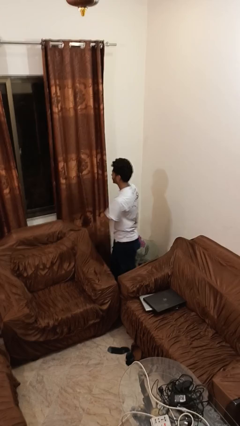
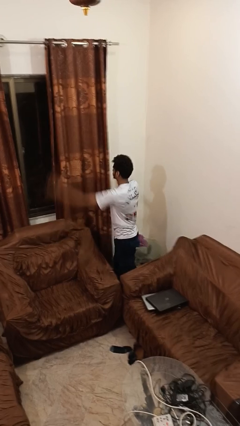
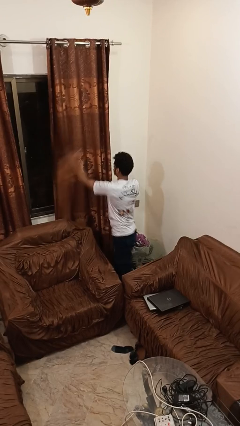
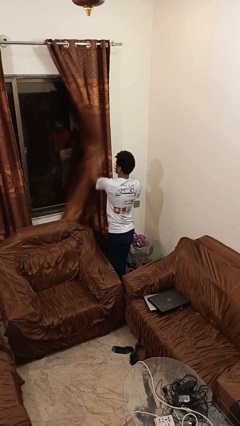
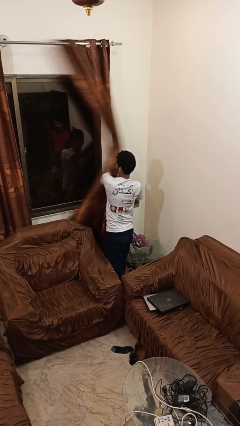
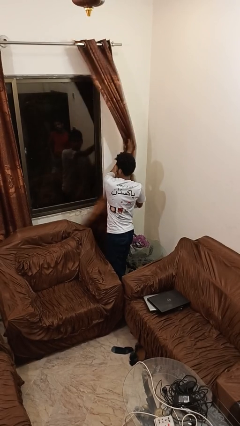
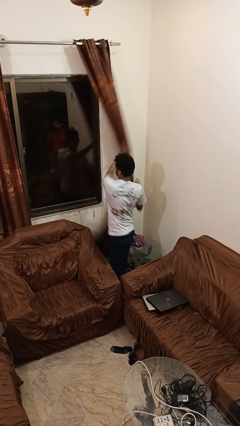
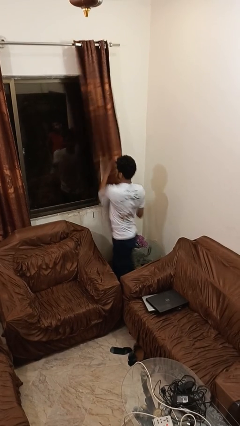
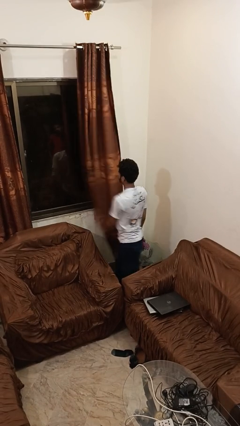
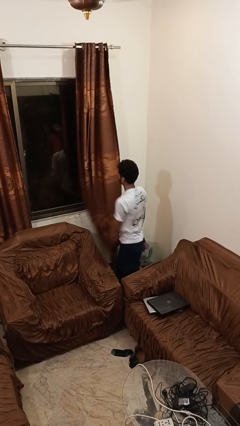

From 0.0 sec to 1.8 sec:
person opens curtains

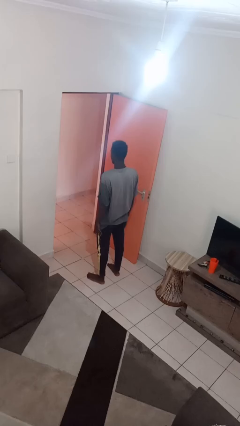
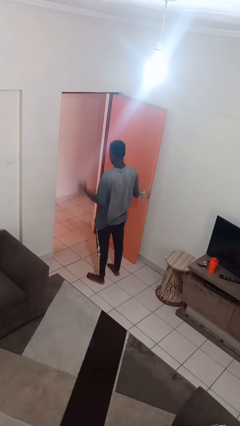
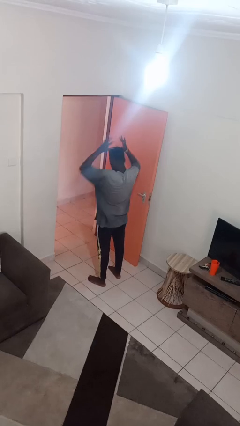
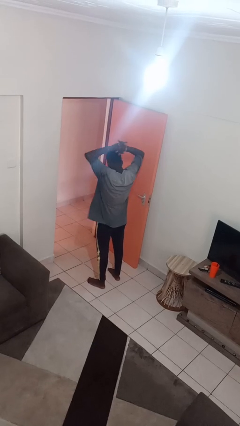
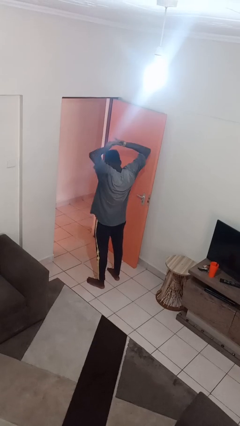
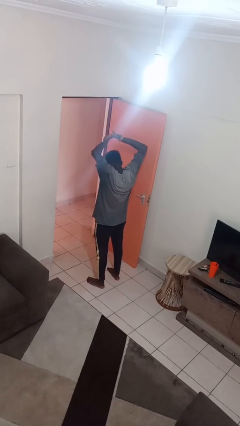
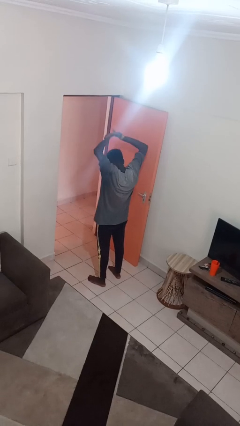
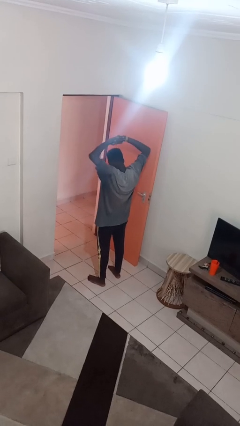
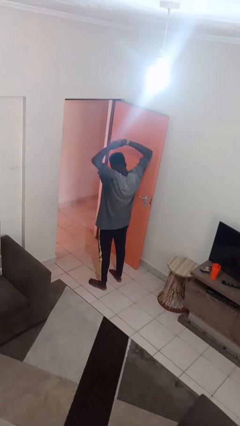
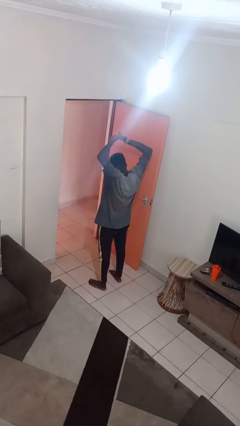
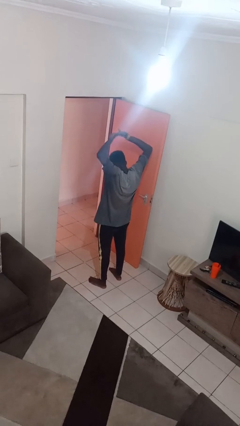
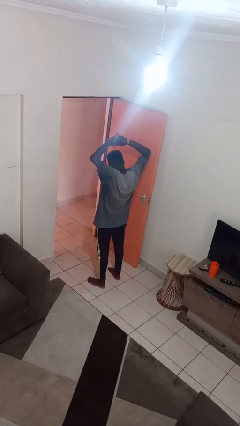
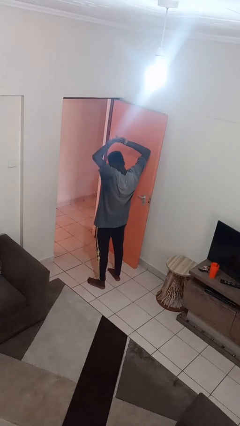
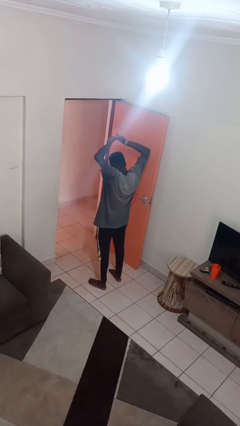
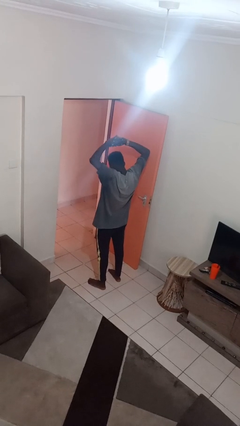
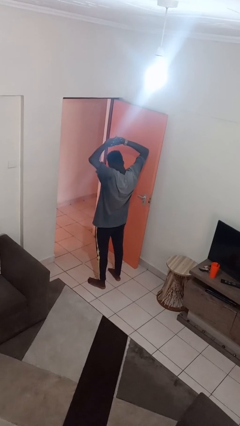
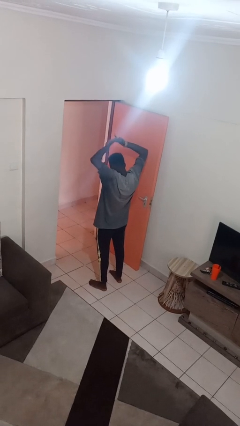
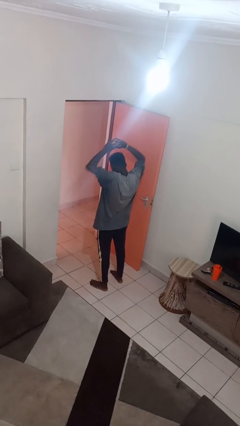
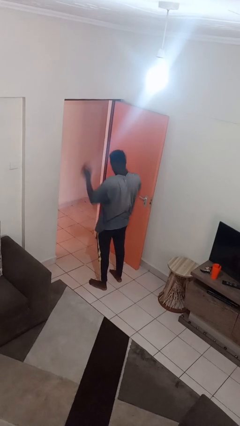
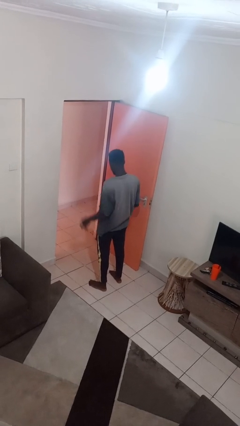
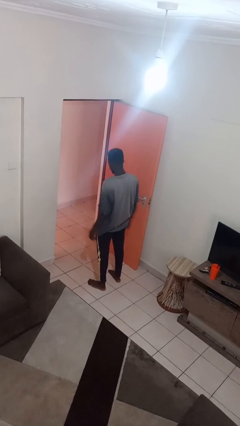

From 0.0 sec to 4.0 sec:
person stretches arms over head

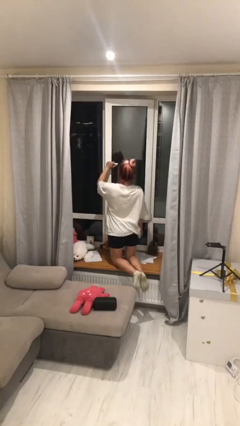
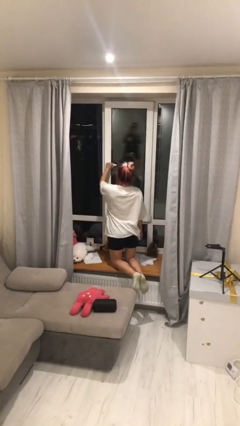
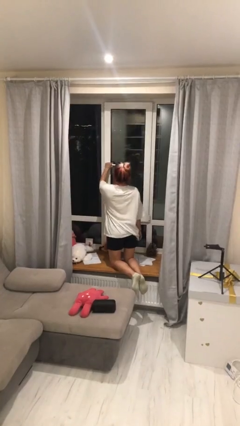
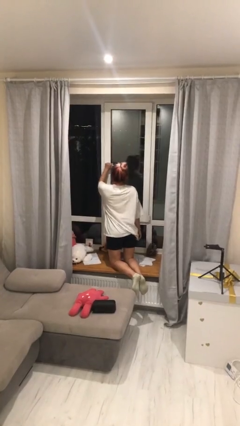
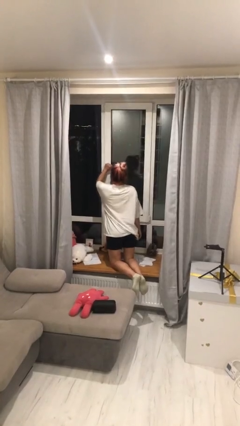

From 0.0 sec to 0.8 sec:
person closes home window

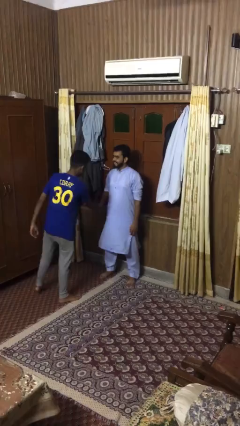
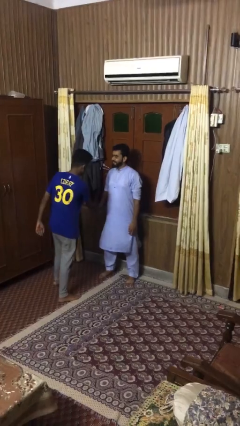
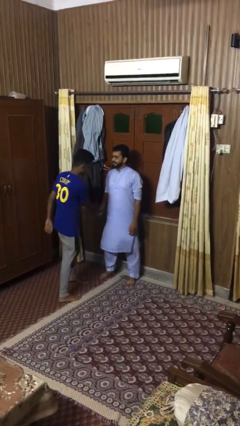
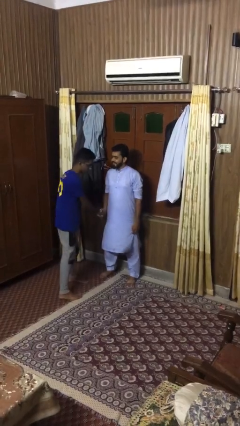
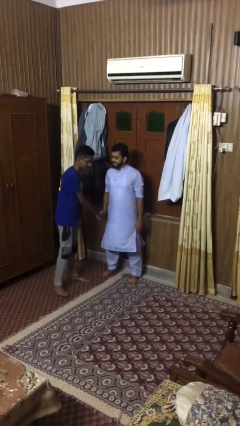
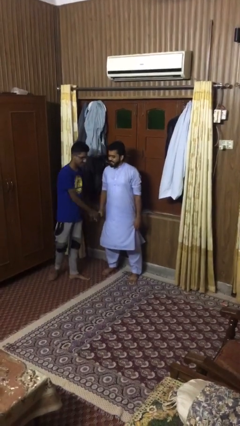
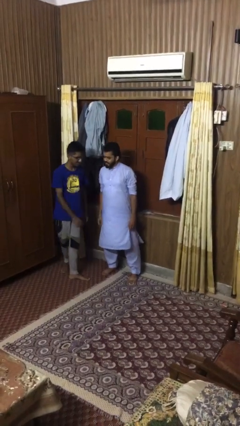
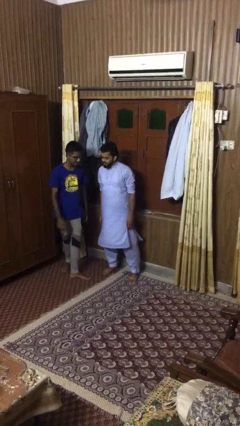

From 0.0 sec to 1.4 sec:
person shakes hand

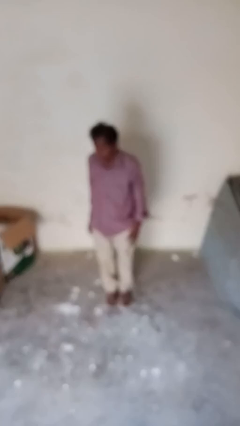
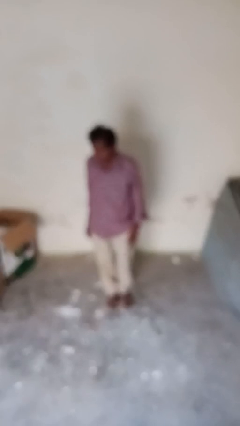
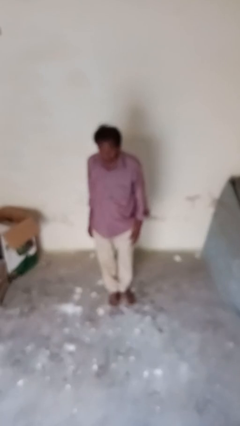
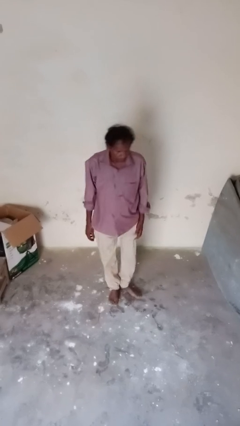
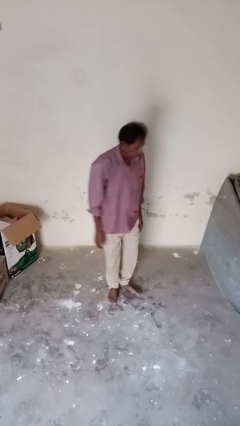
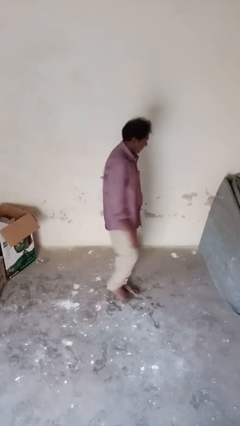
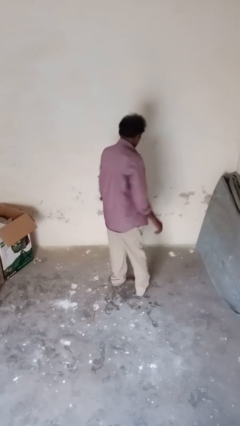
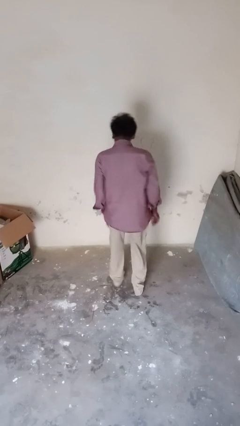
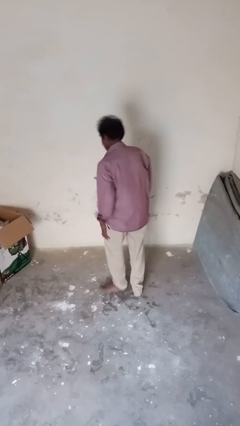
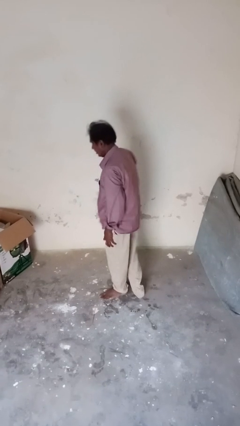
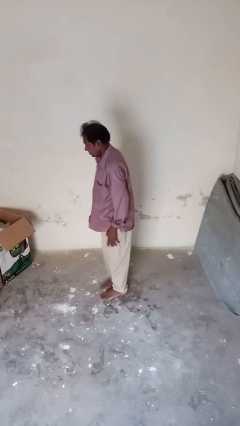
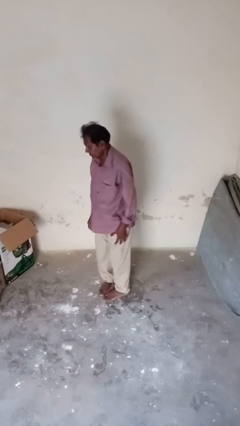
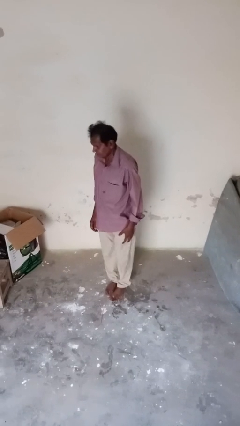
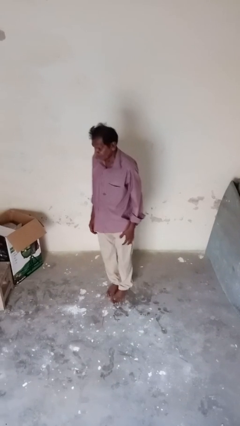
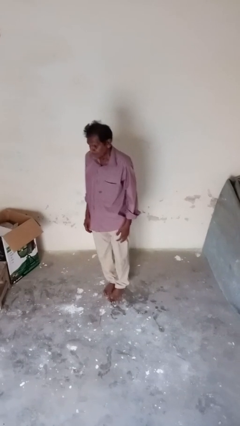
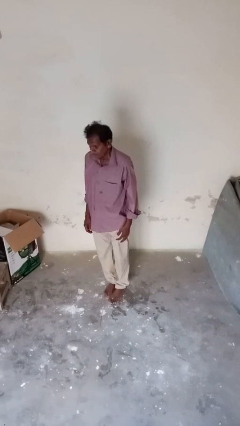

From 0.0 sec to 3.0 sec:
person twirls

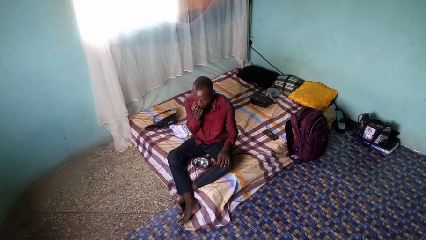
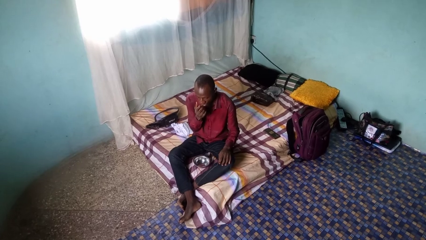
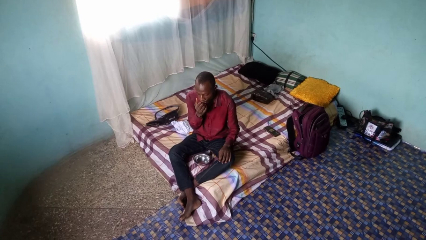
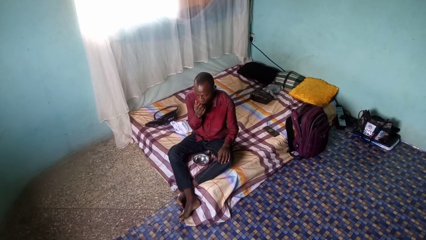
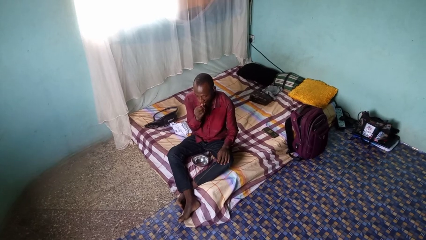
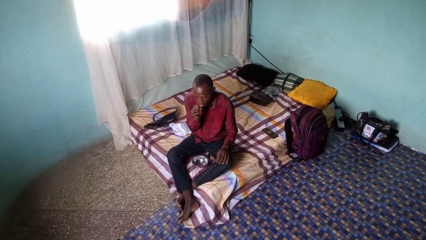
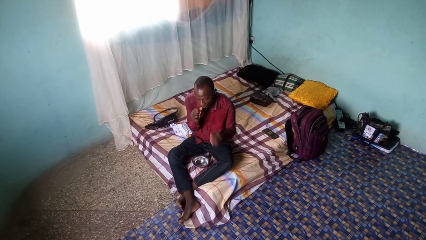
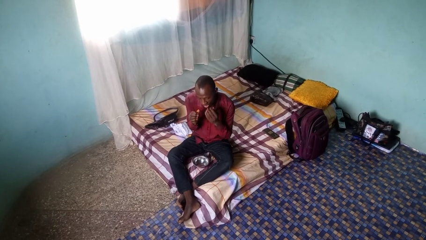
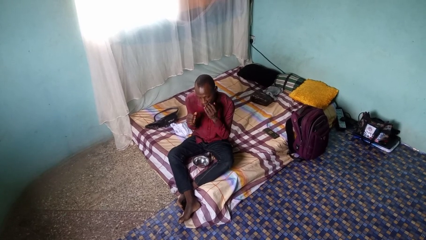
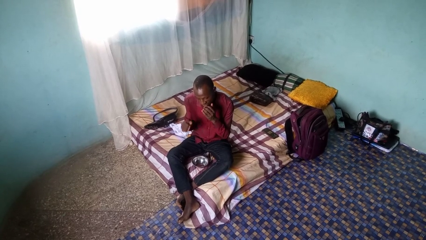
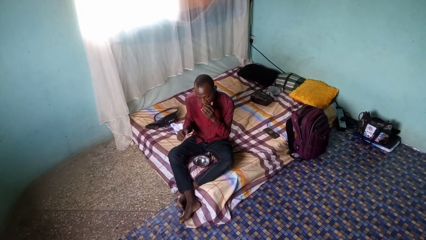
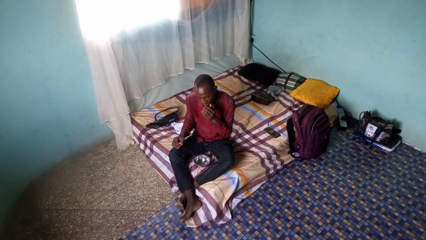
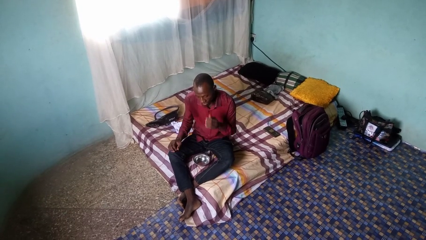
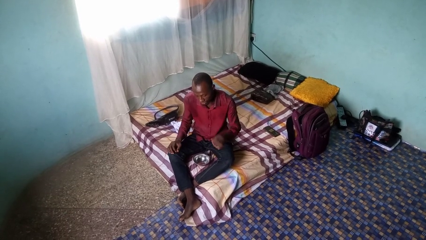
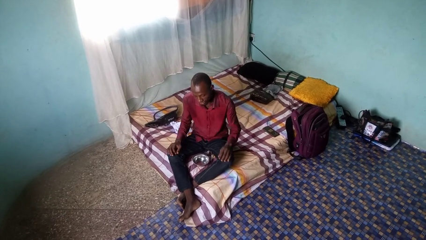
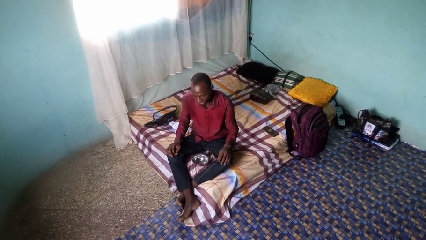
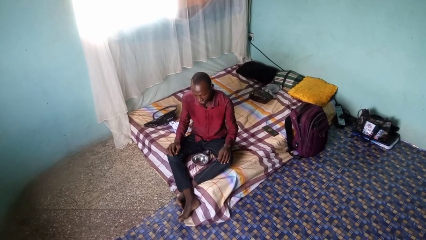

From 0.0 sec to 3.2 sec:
person licks fingers

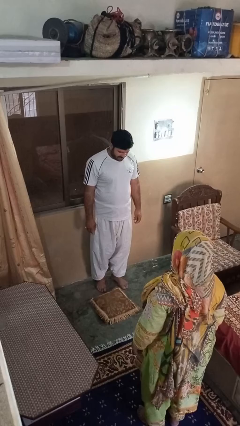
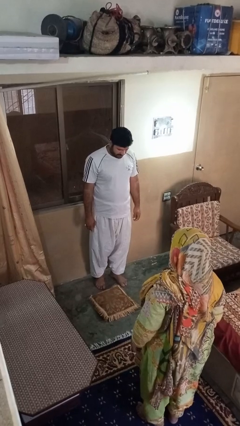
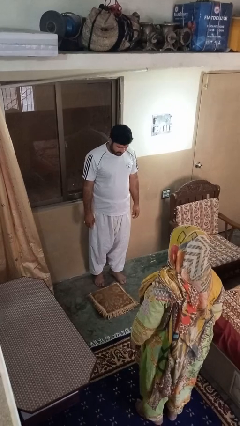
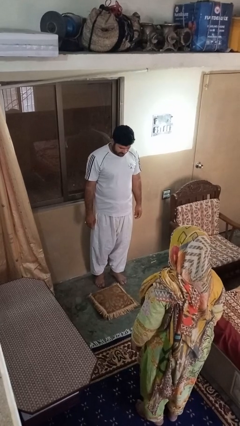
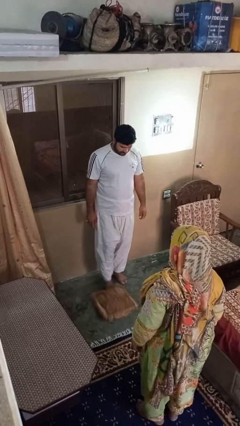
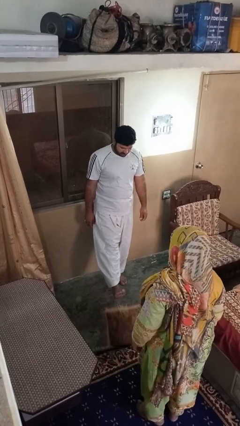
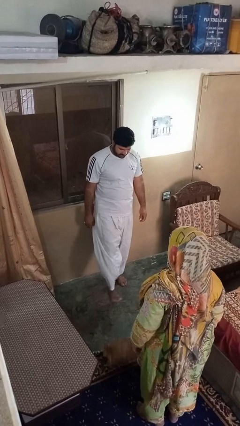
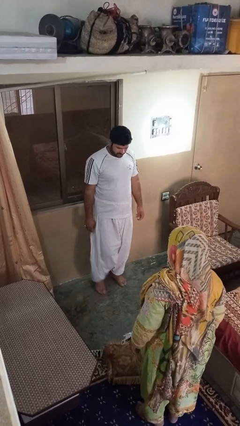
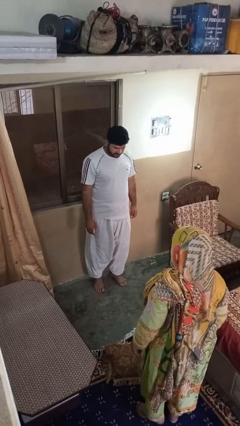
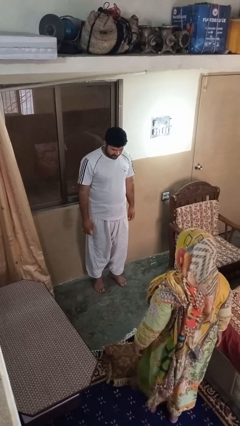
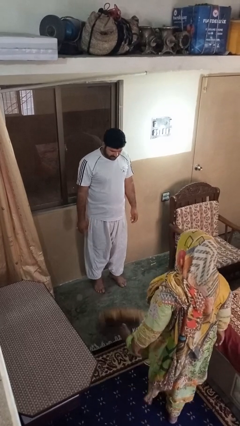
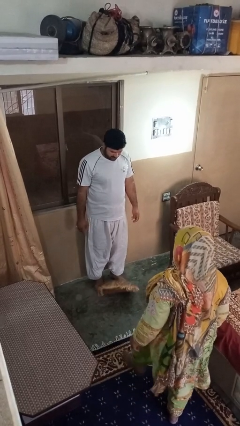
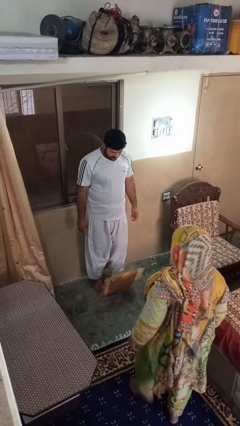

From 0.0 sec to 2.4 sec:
person kicks object to person

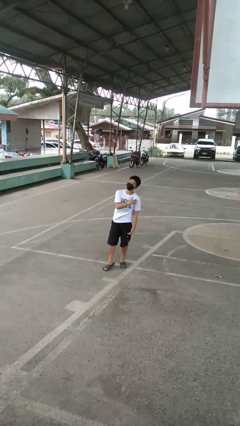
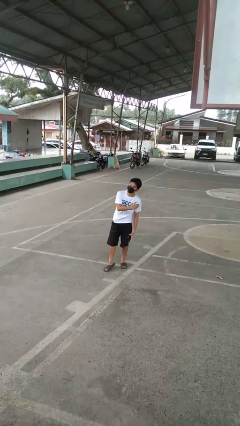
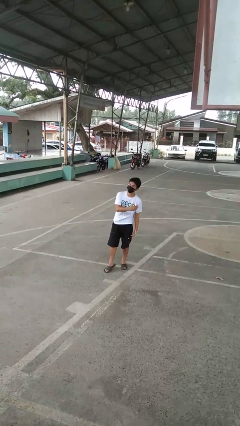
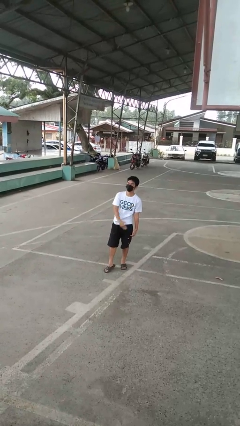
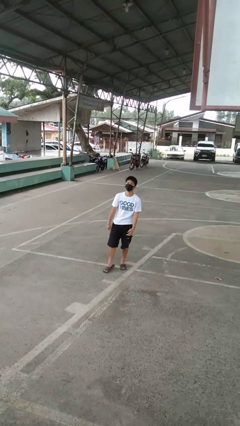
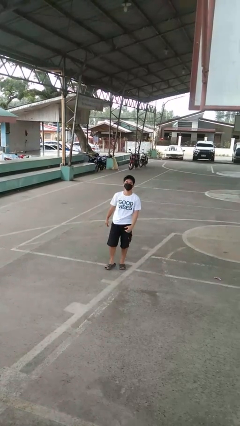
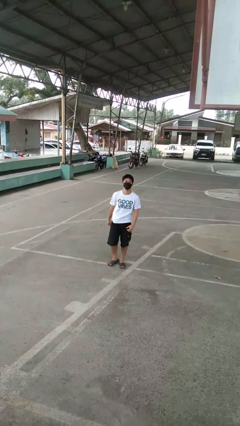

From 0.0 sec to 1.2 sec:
person gestures cut
